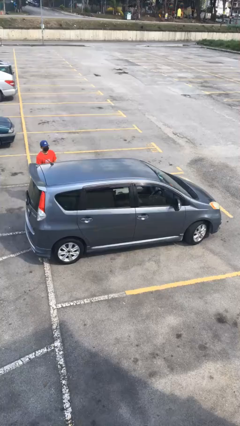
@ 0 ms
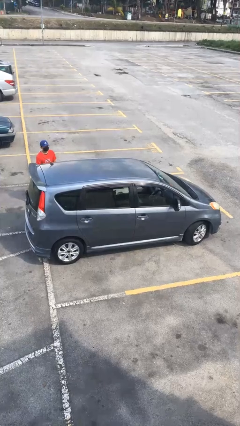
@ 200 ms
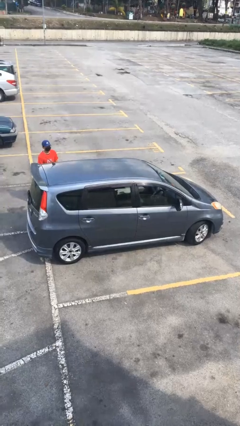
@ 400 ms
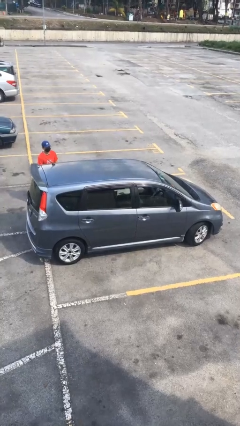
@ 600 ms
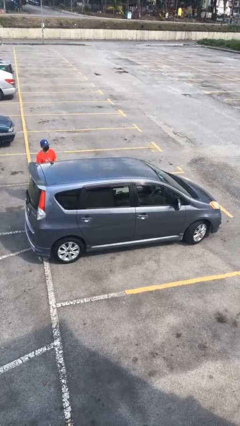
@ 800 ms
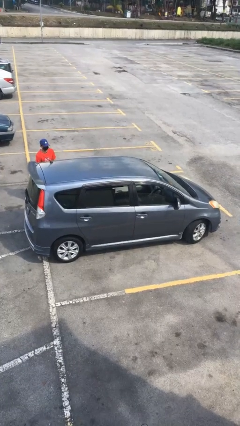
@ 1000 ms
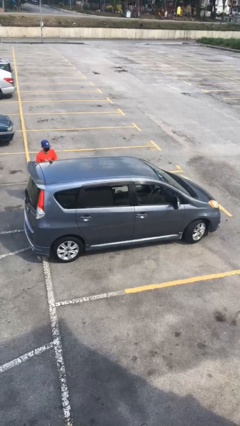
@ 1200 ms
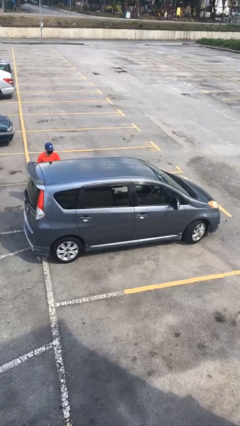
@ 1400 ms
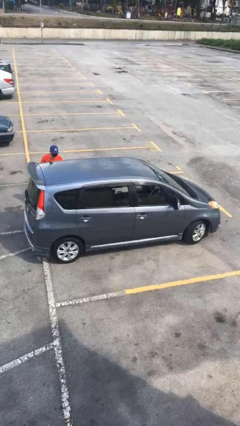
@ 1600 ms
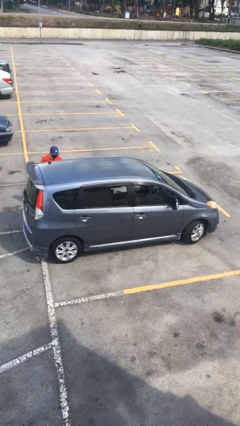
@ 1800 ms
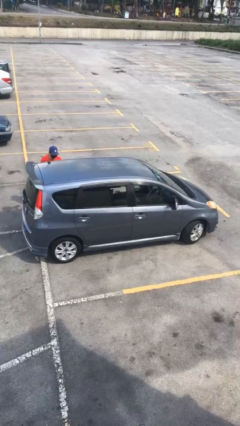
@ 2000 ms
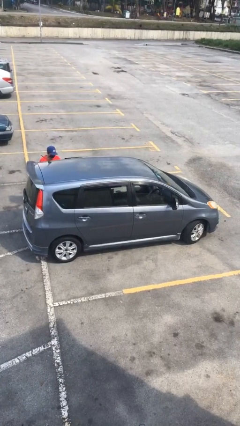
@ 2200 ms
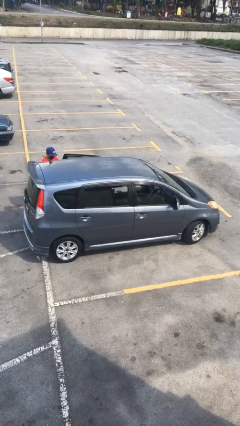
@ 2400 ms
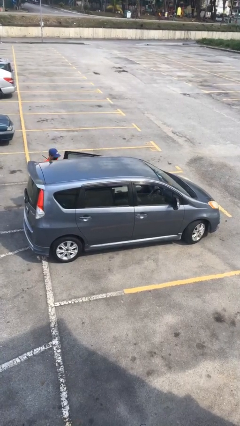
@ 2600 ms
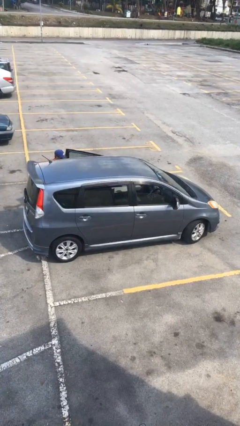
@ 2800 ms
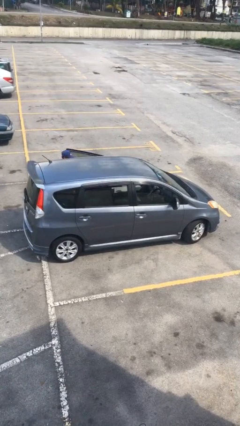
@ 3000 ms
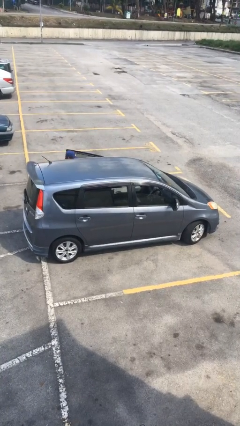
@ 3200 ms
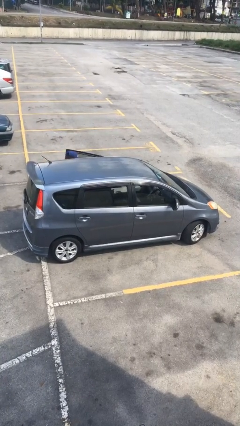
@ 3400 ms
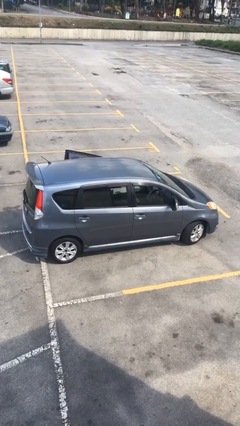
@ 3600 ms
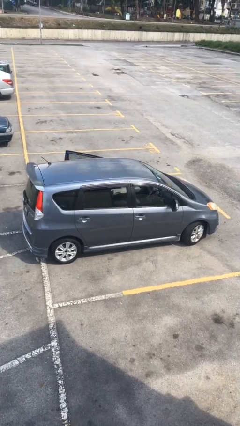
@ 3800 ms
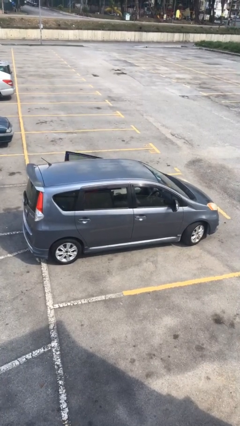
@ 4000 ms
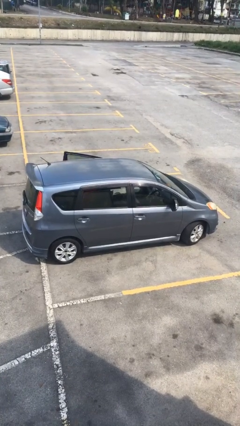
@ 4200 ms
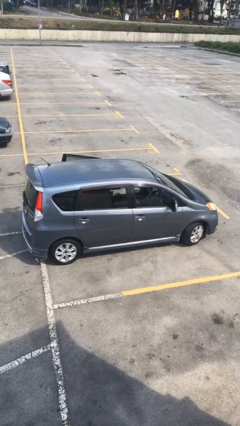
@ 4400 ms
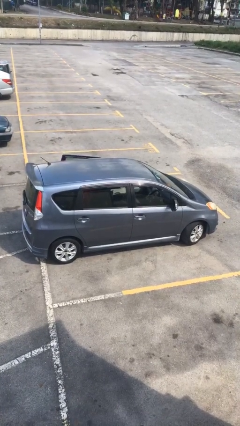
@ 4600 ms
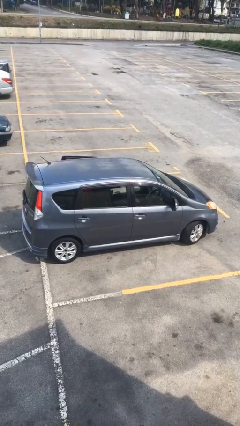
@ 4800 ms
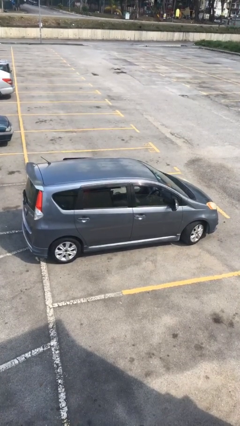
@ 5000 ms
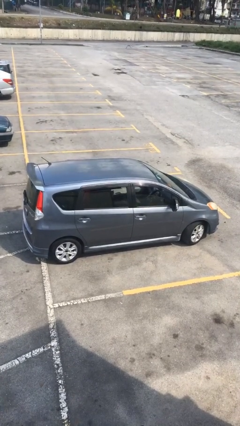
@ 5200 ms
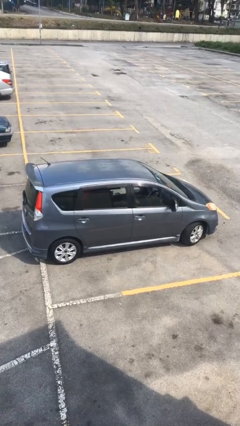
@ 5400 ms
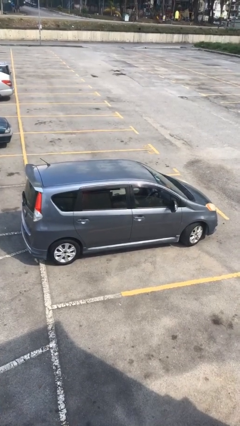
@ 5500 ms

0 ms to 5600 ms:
car picks up person

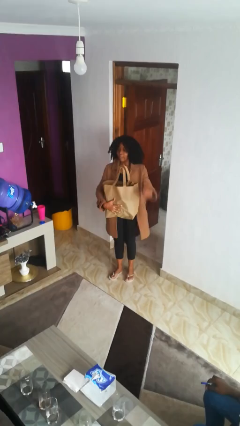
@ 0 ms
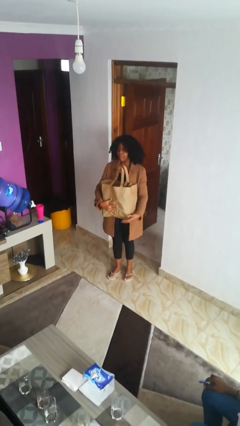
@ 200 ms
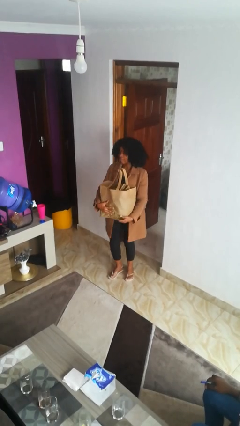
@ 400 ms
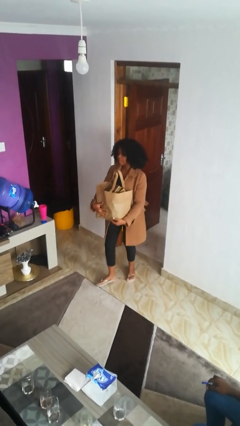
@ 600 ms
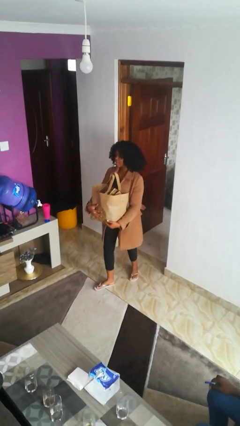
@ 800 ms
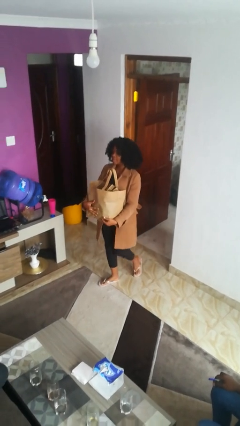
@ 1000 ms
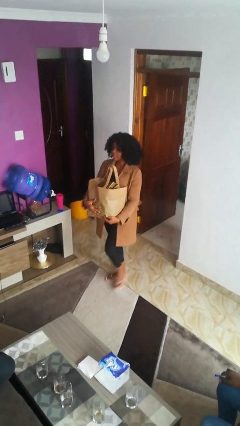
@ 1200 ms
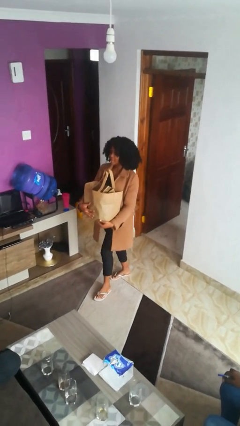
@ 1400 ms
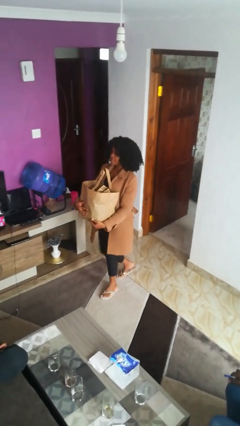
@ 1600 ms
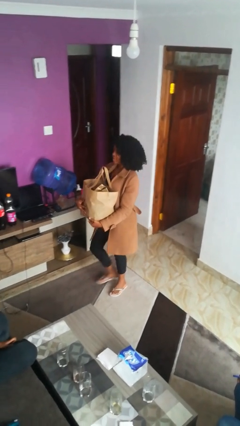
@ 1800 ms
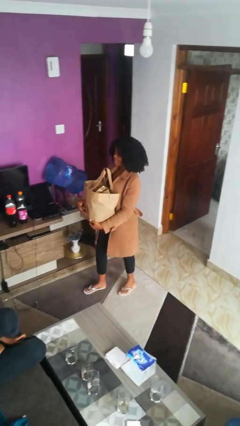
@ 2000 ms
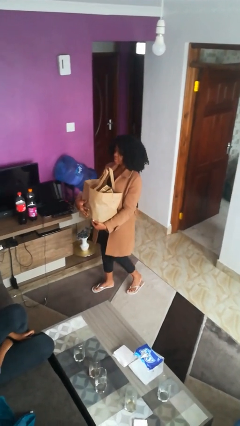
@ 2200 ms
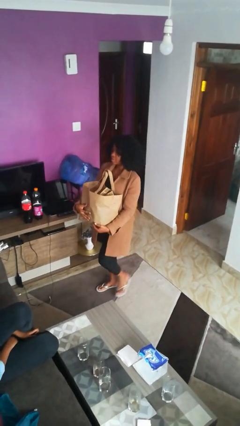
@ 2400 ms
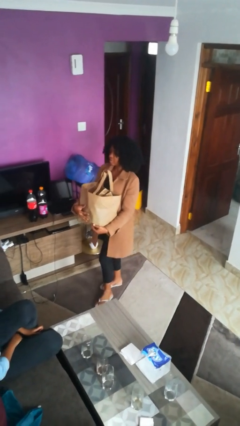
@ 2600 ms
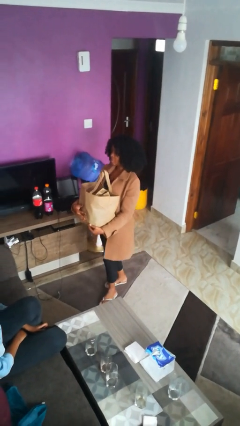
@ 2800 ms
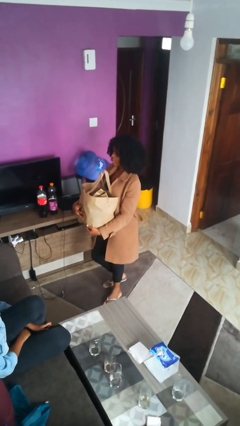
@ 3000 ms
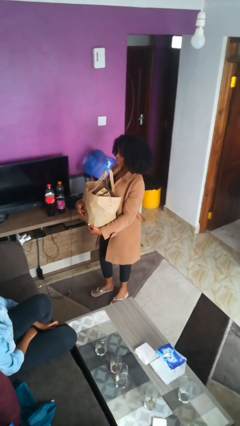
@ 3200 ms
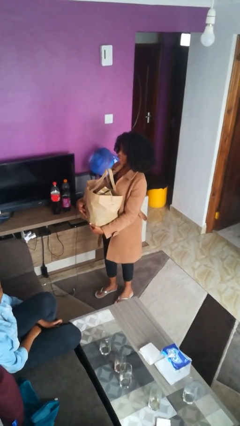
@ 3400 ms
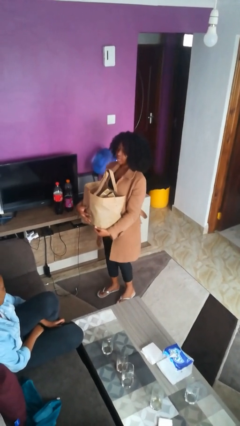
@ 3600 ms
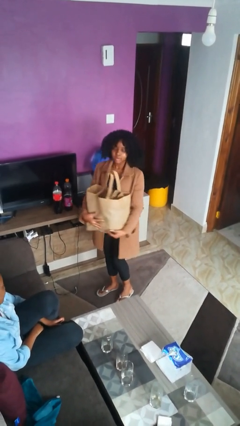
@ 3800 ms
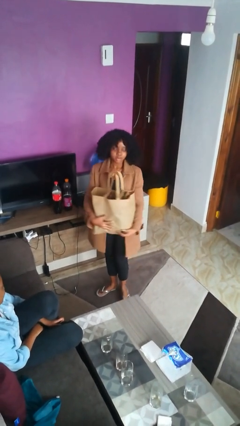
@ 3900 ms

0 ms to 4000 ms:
person carries groceries

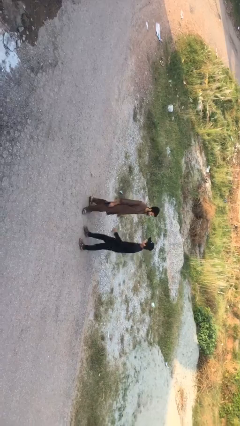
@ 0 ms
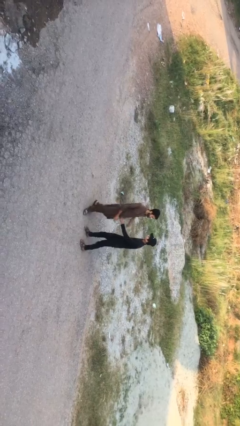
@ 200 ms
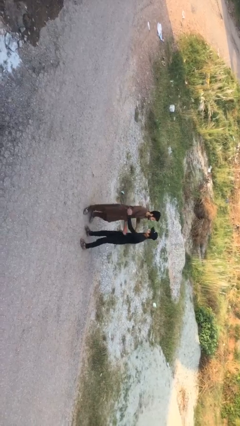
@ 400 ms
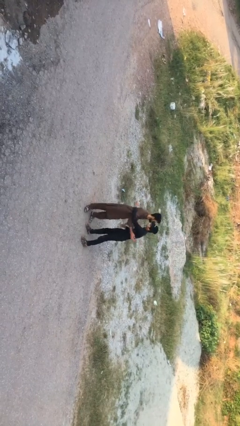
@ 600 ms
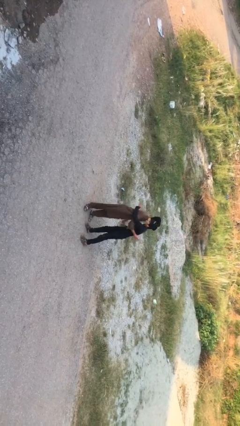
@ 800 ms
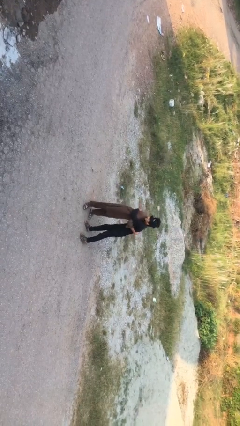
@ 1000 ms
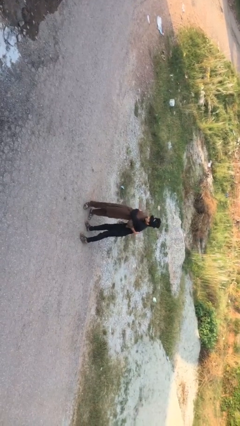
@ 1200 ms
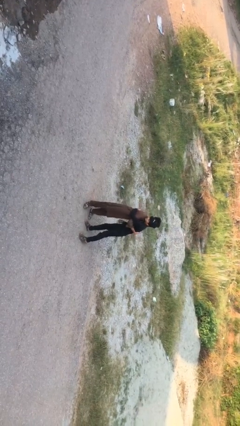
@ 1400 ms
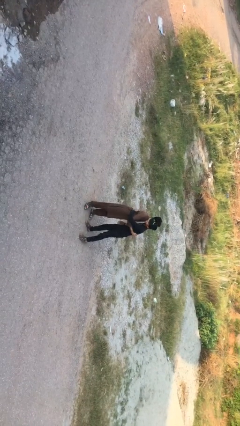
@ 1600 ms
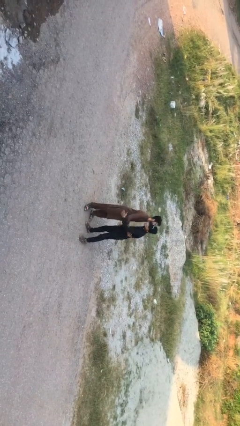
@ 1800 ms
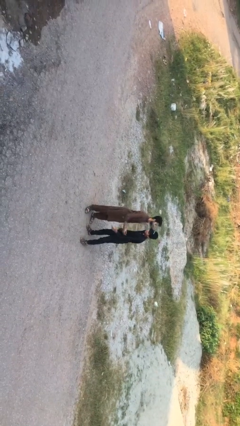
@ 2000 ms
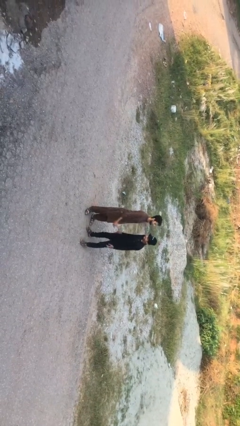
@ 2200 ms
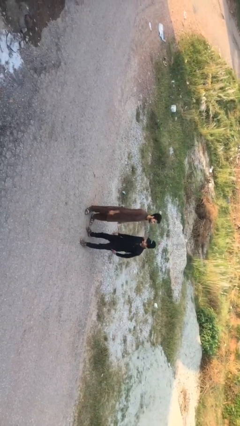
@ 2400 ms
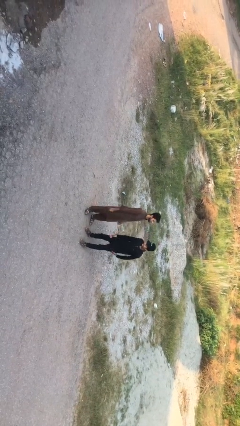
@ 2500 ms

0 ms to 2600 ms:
person embraces person

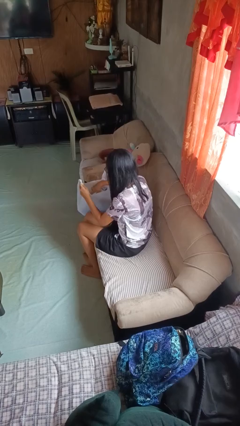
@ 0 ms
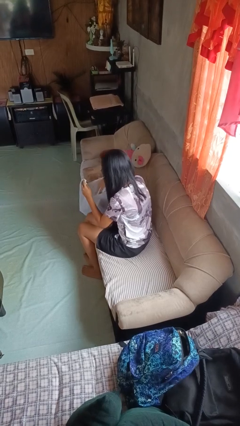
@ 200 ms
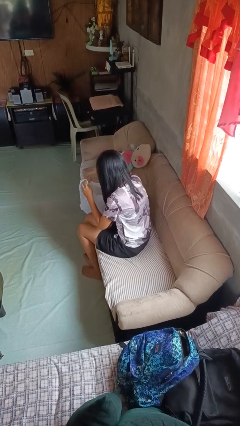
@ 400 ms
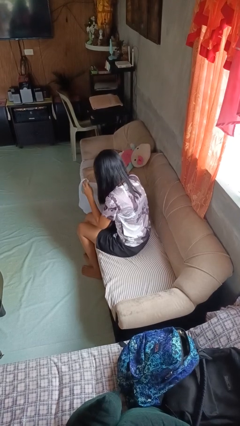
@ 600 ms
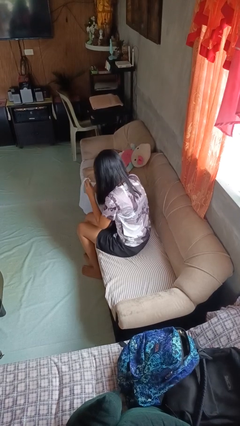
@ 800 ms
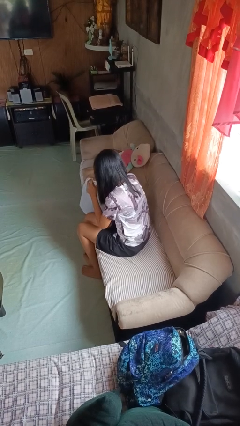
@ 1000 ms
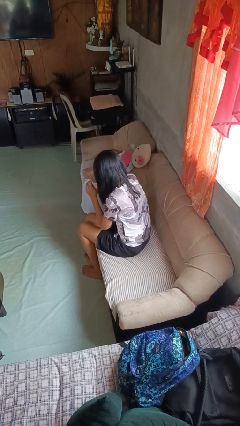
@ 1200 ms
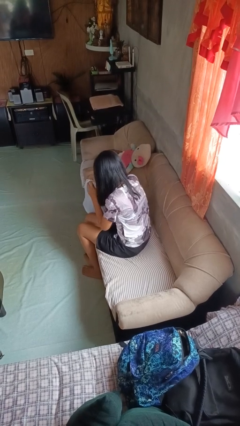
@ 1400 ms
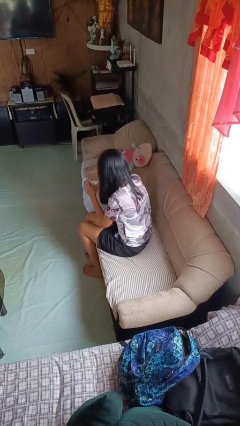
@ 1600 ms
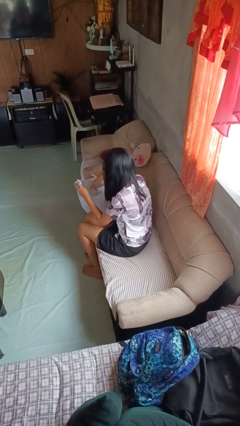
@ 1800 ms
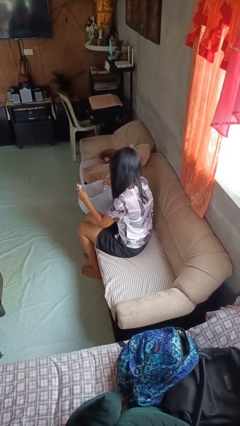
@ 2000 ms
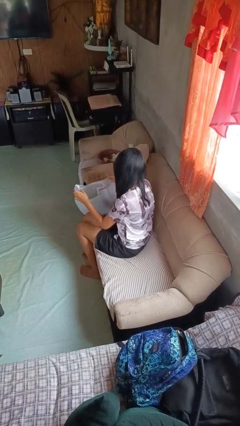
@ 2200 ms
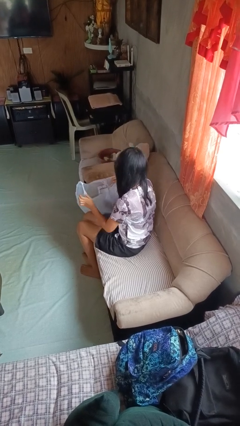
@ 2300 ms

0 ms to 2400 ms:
person searches in bag

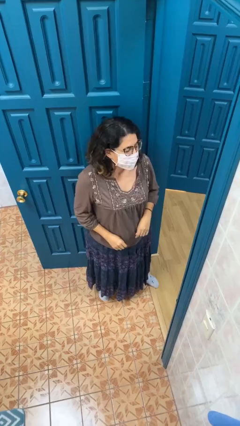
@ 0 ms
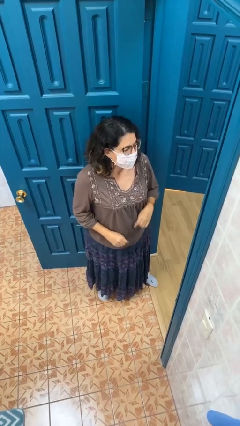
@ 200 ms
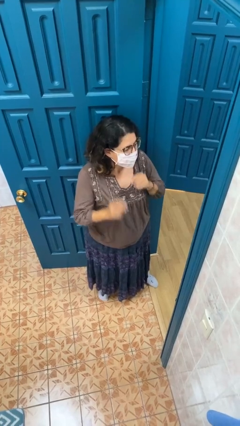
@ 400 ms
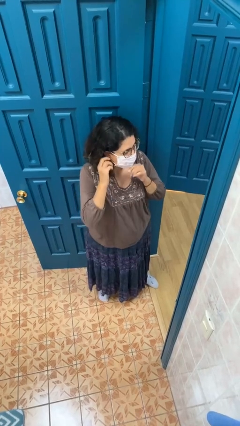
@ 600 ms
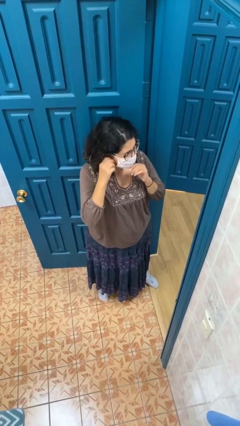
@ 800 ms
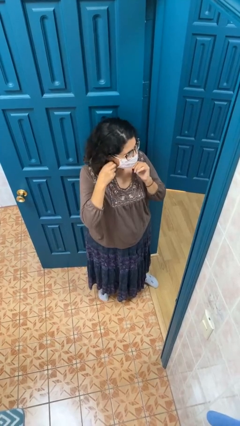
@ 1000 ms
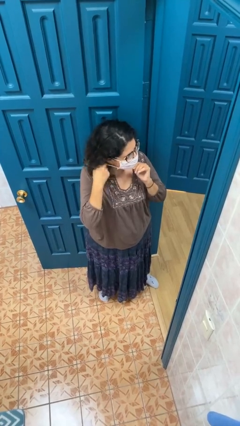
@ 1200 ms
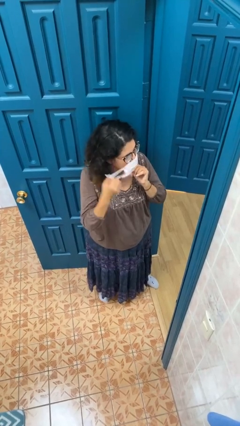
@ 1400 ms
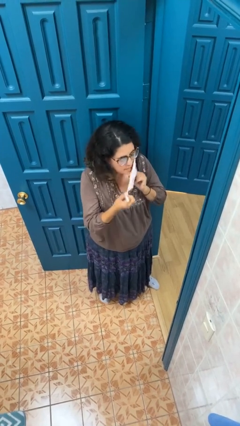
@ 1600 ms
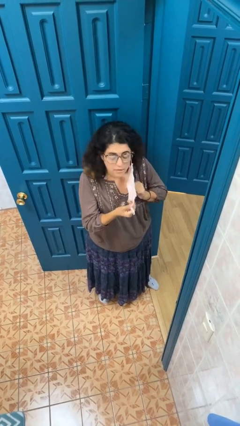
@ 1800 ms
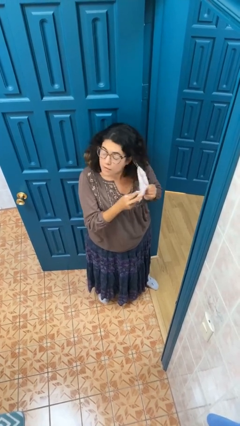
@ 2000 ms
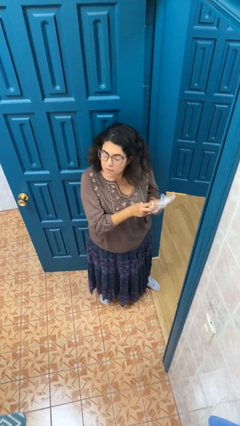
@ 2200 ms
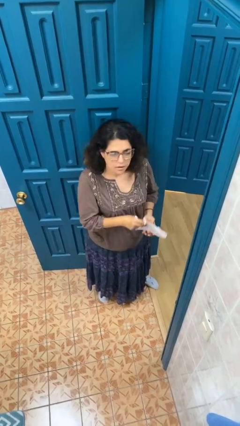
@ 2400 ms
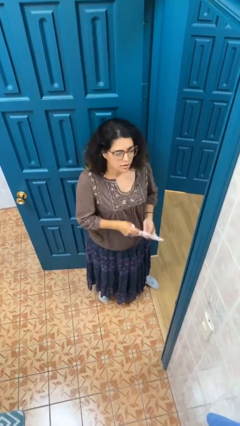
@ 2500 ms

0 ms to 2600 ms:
person takes off facemask

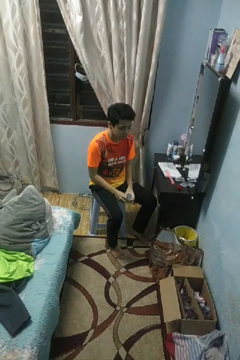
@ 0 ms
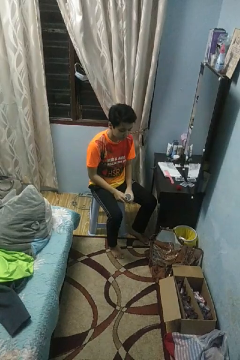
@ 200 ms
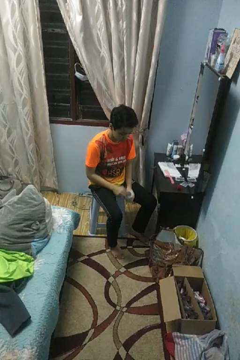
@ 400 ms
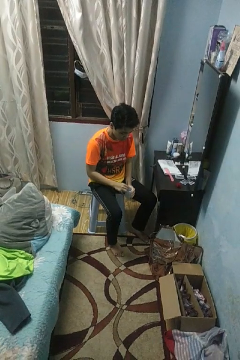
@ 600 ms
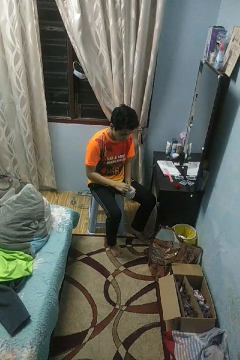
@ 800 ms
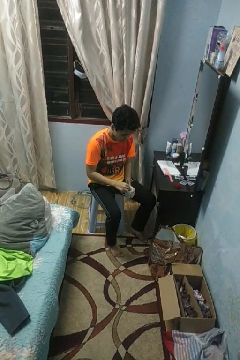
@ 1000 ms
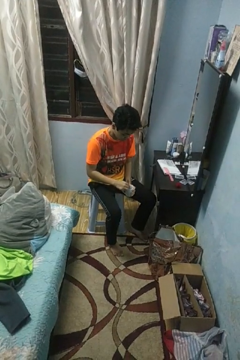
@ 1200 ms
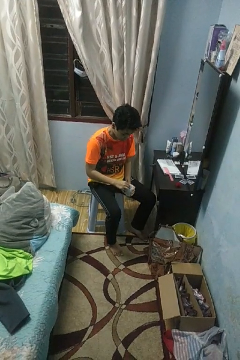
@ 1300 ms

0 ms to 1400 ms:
person stirs mug
